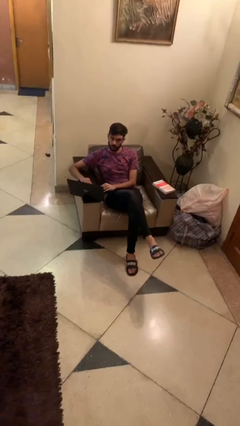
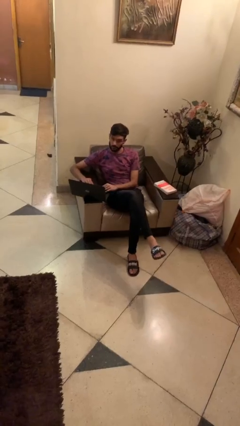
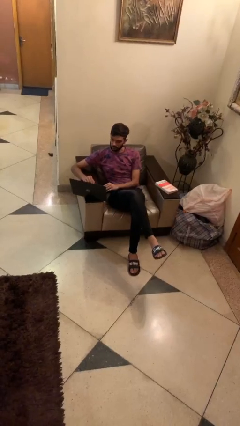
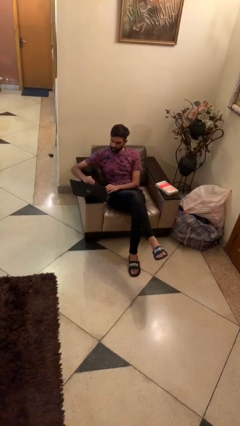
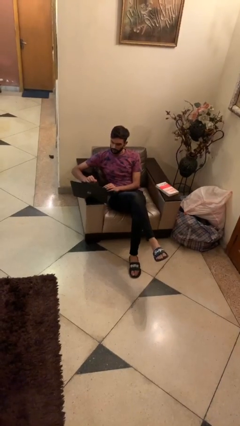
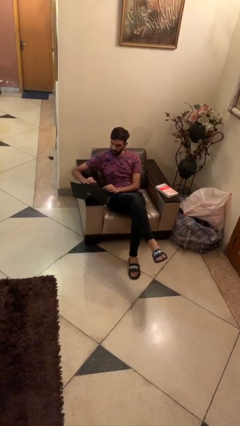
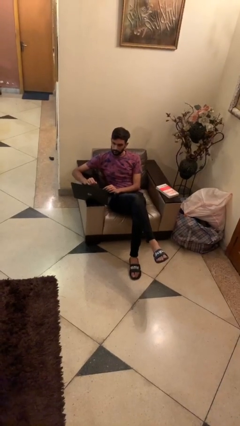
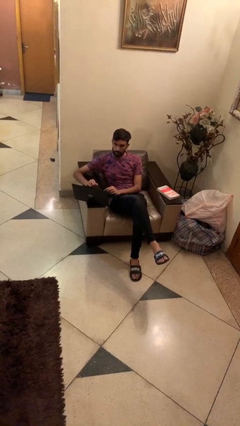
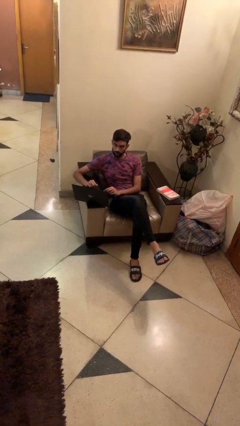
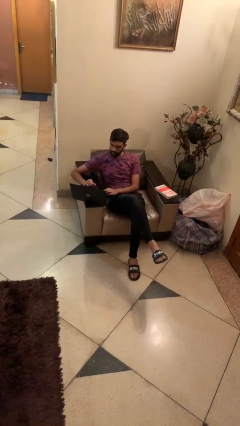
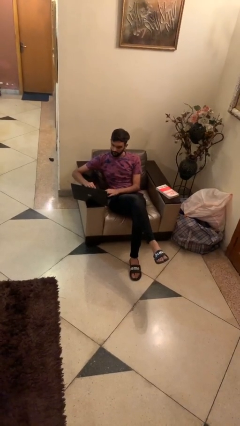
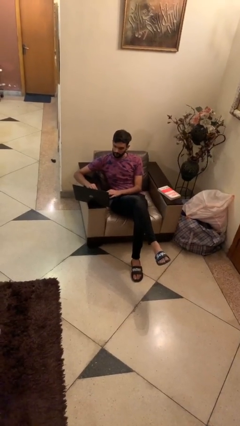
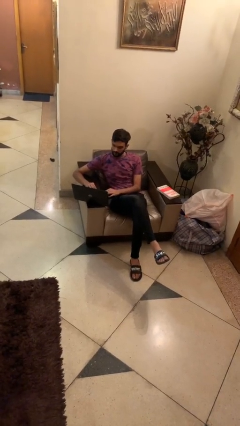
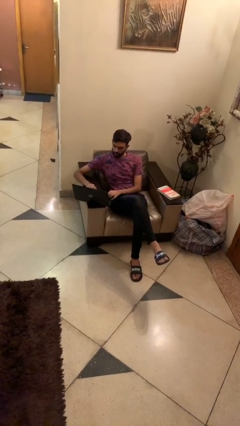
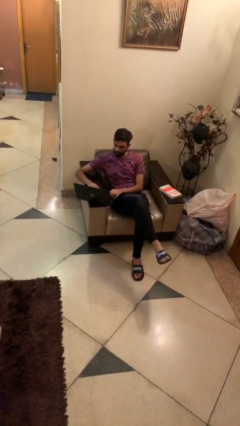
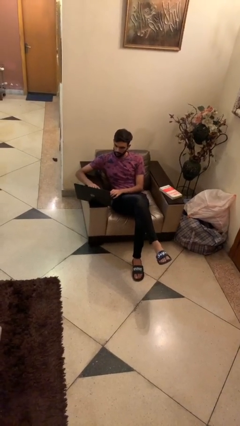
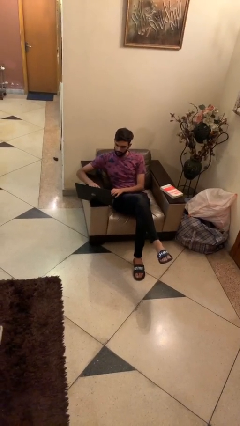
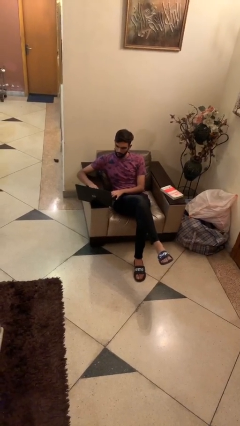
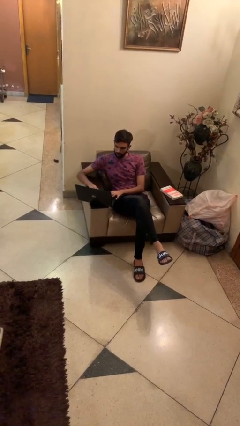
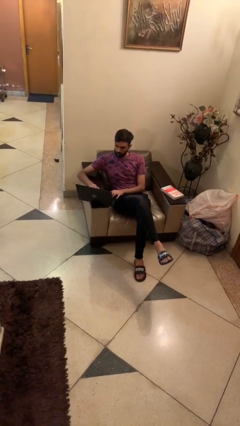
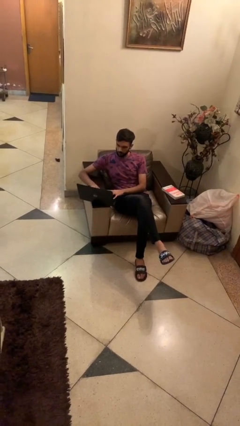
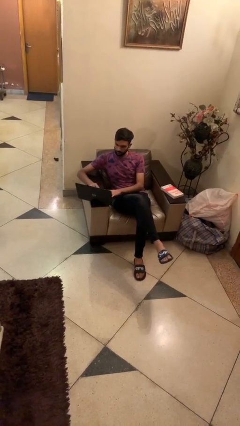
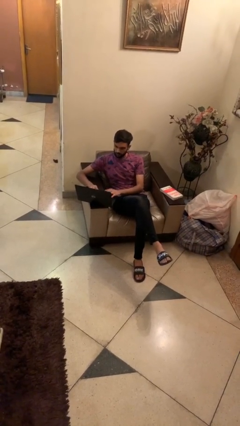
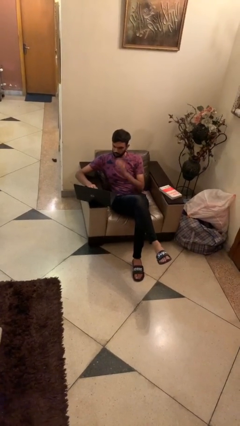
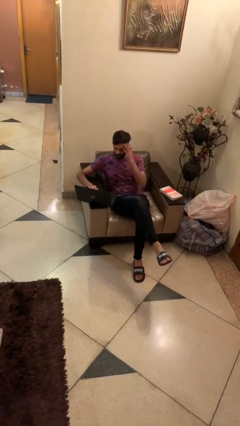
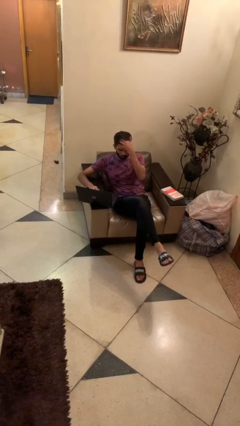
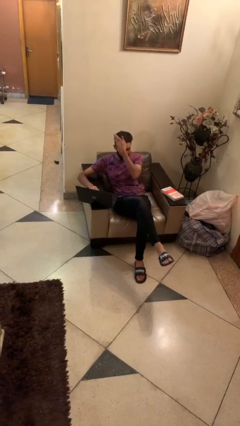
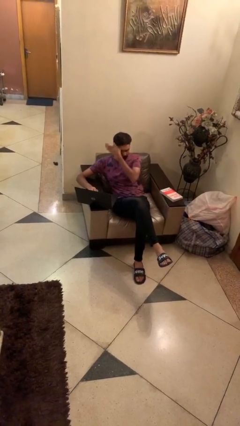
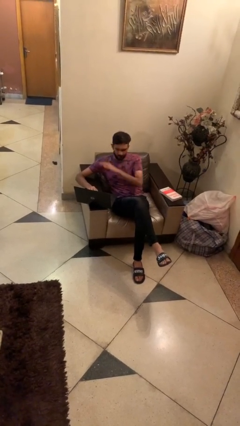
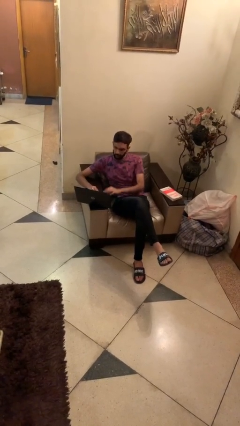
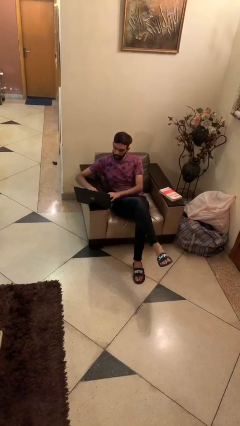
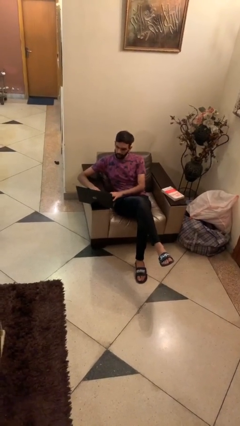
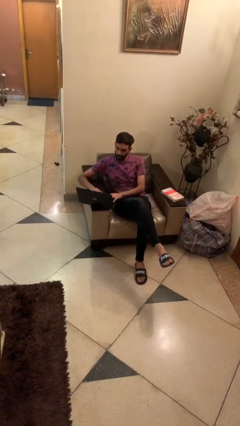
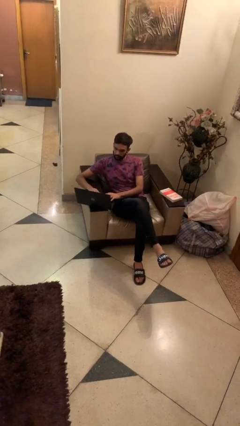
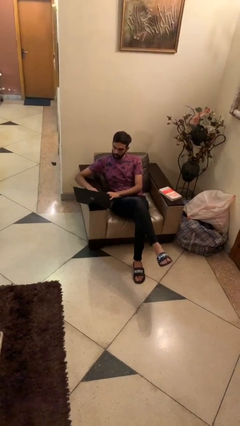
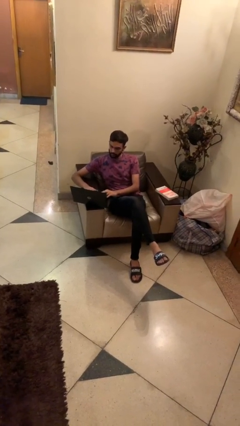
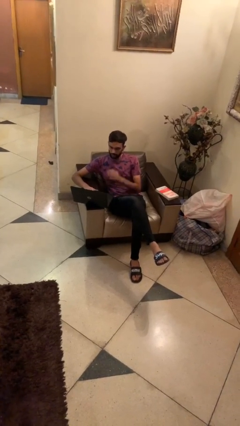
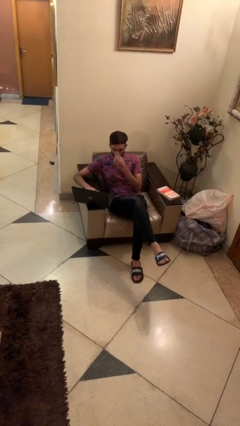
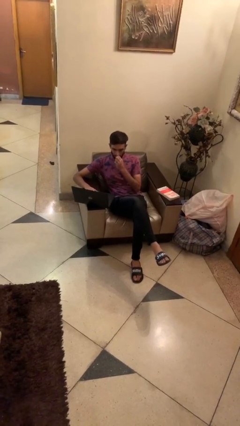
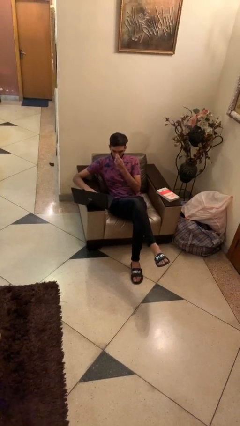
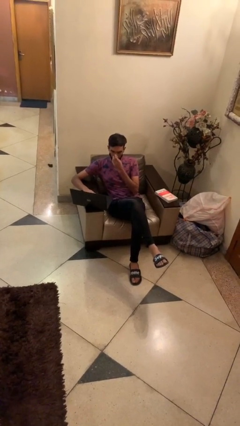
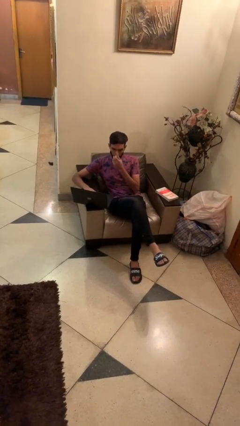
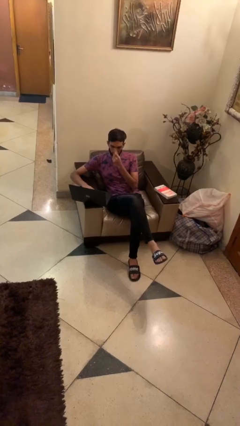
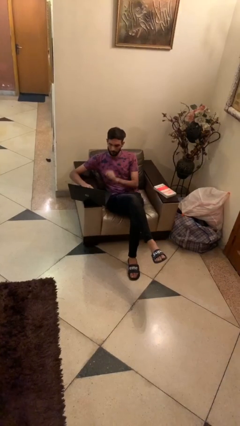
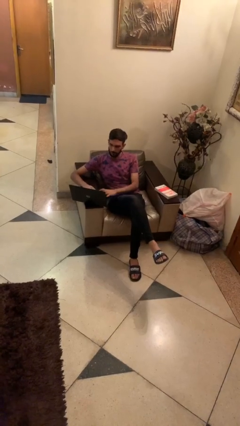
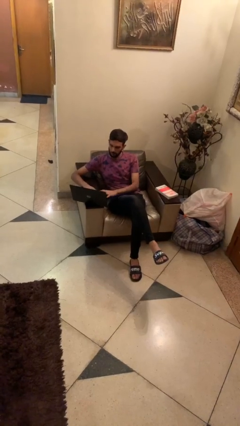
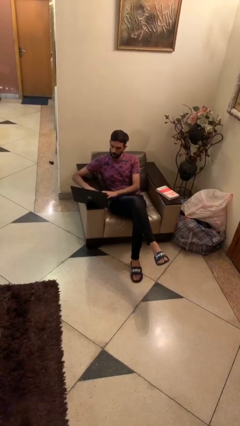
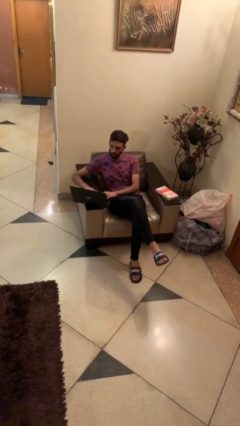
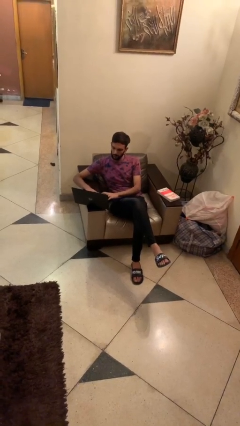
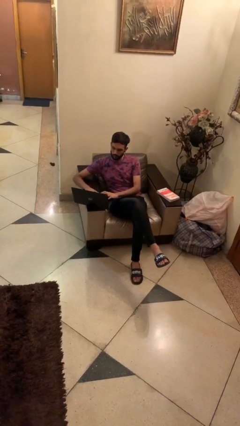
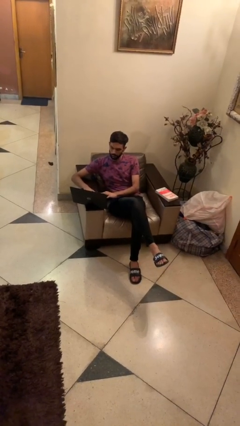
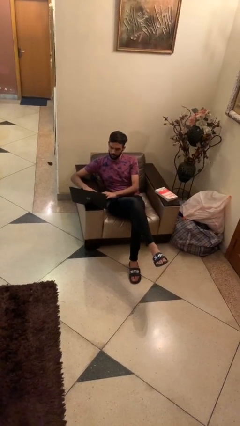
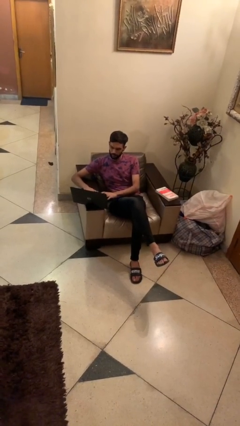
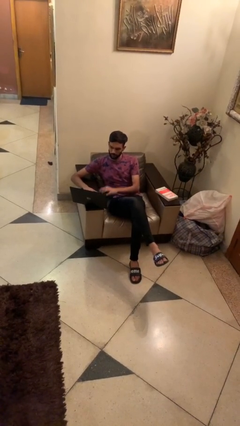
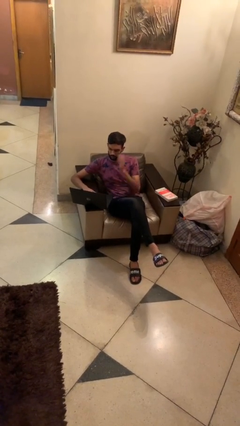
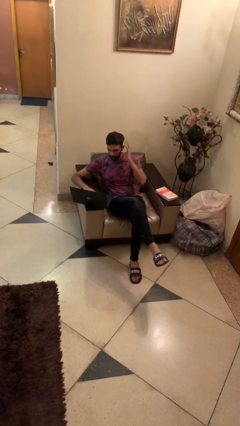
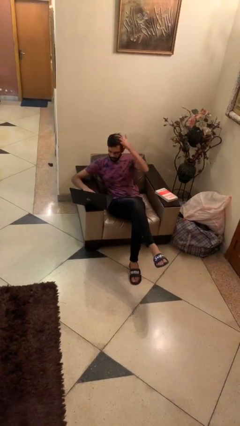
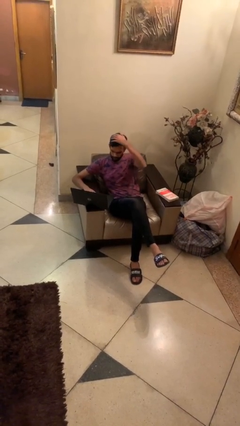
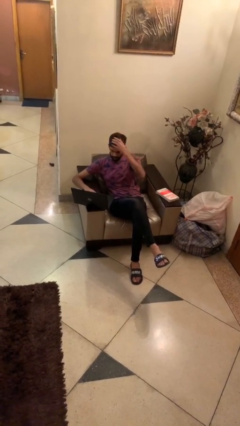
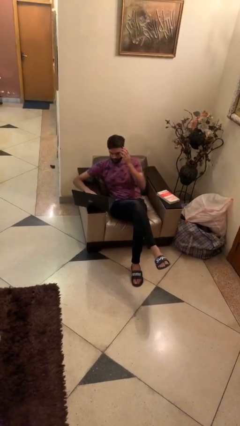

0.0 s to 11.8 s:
person interacts with laptop

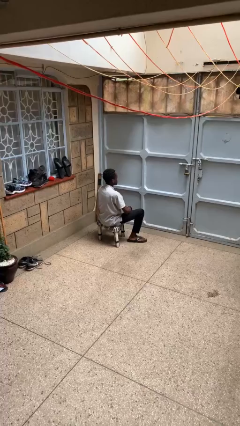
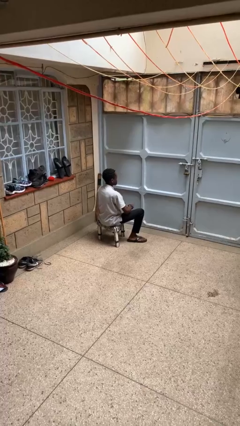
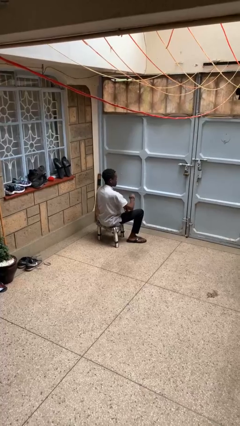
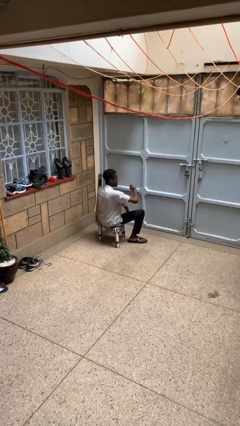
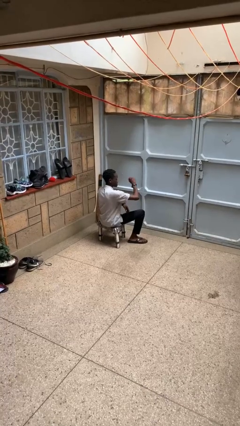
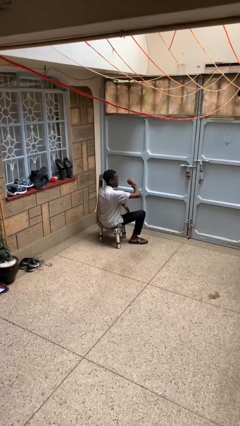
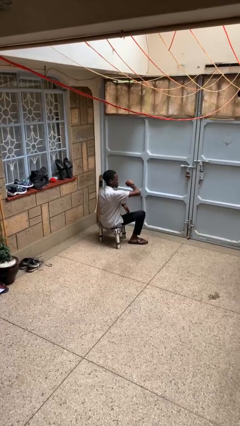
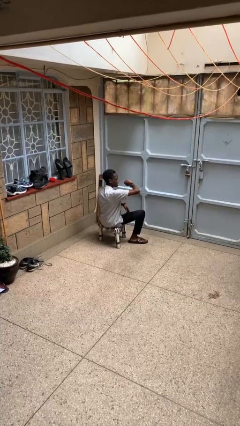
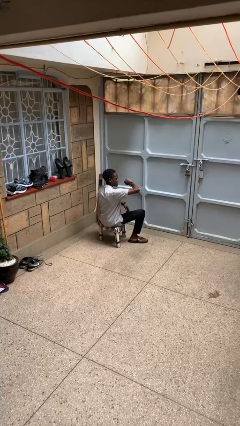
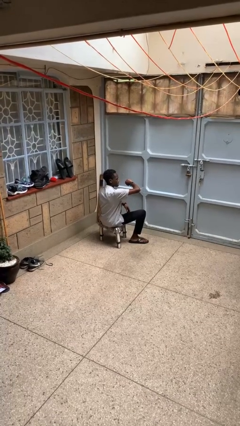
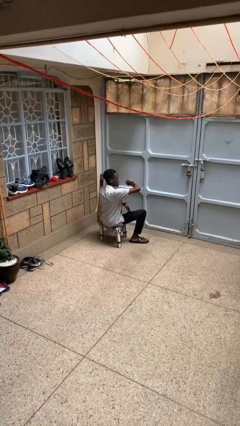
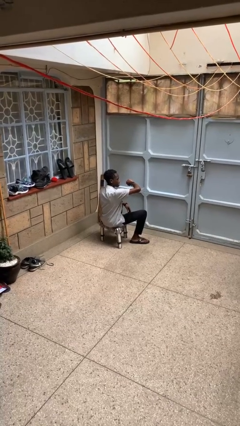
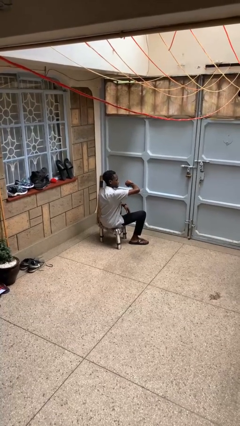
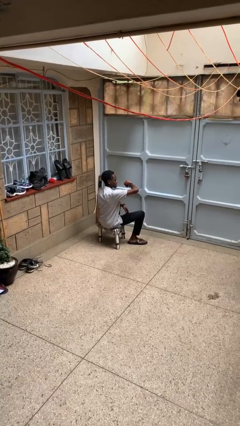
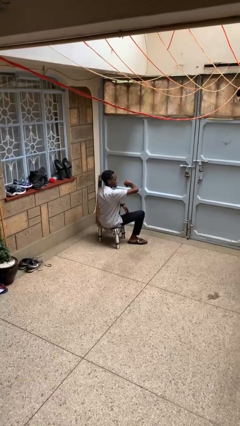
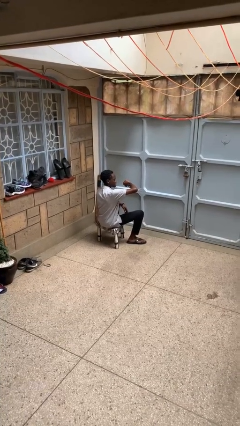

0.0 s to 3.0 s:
person looks at wristwatch

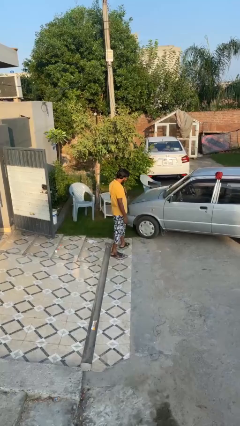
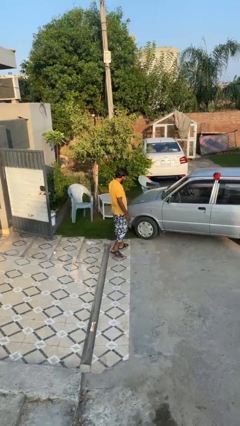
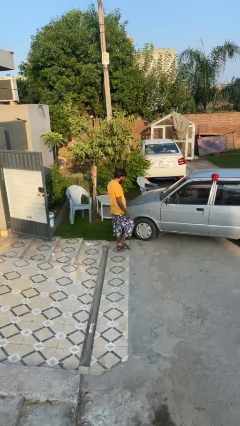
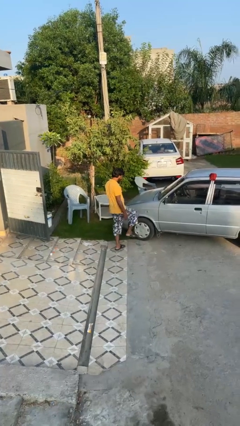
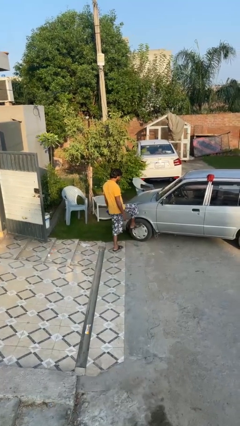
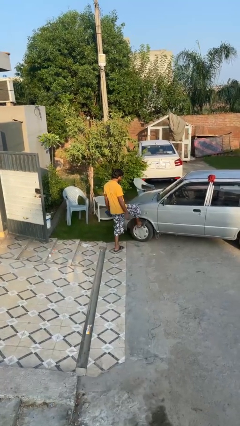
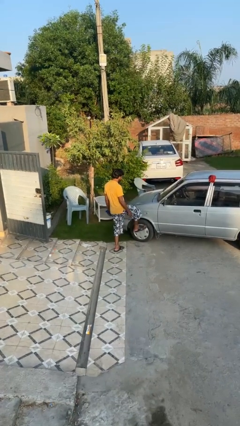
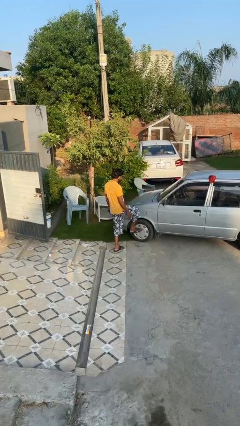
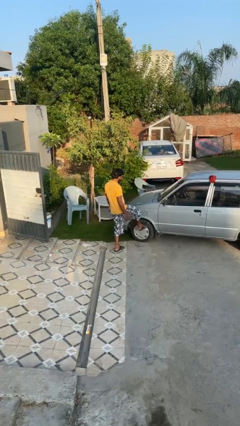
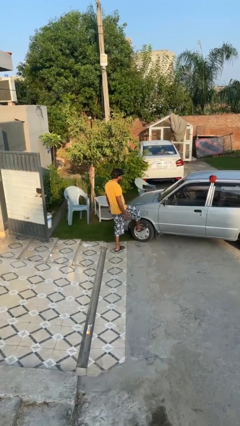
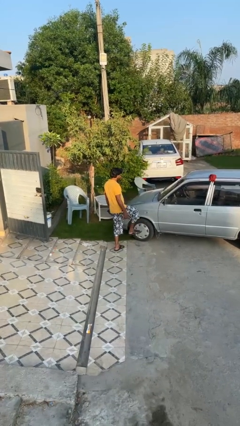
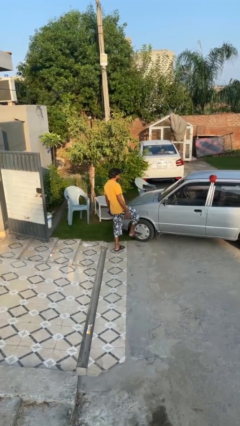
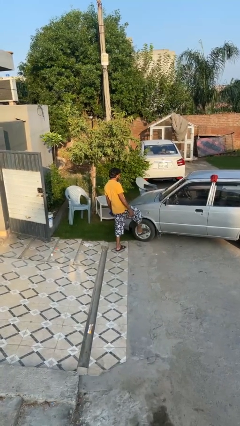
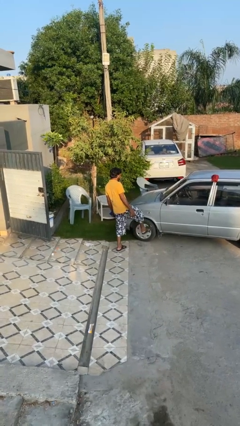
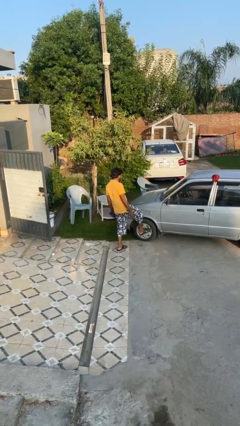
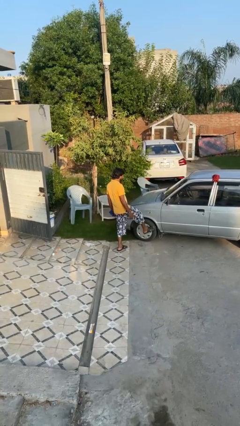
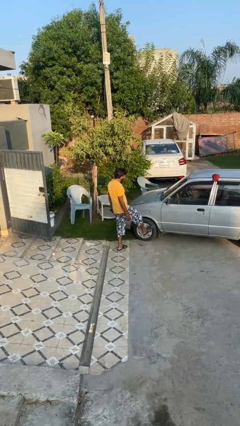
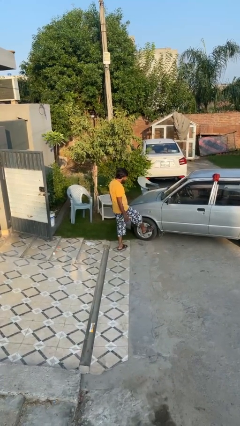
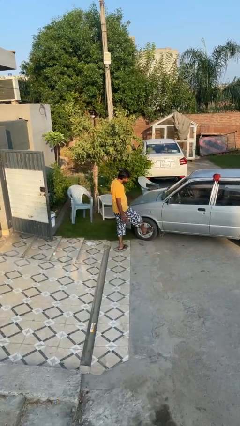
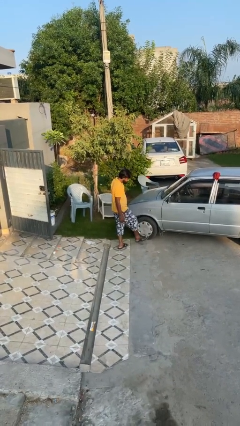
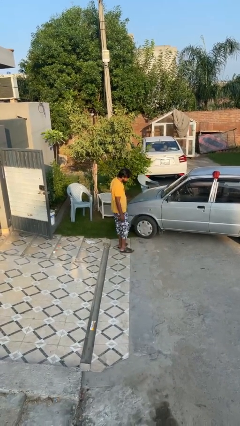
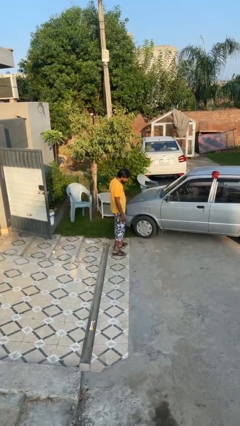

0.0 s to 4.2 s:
person kicks car tires
